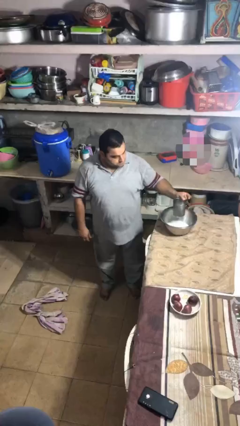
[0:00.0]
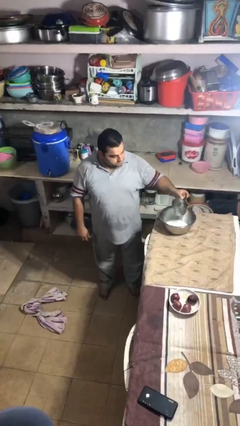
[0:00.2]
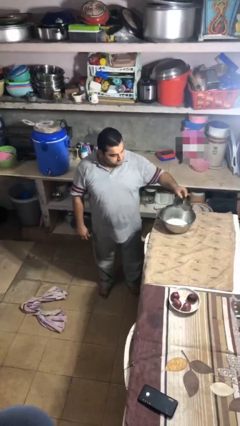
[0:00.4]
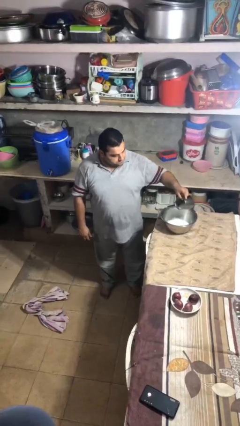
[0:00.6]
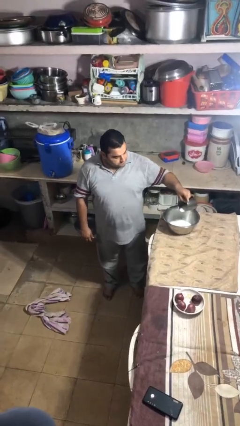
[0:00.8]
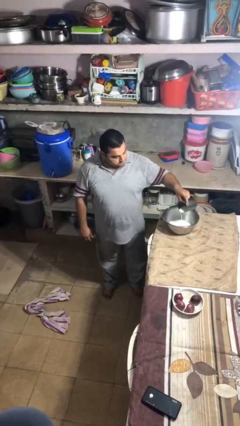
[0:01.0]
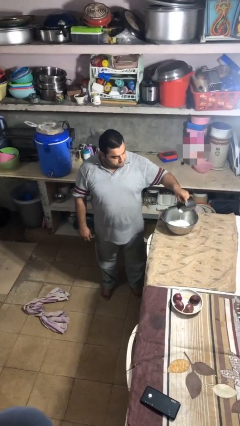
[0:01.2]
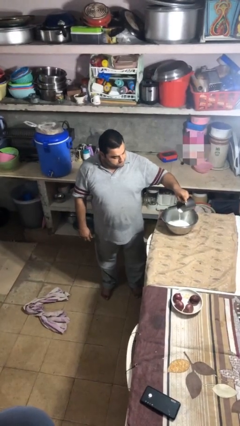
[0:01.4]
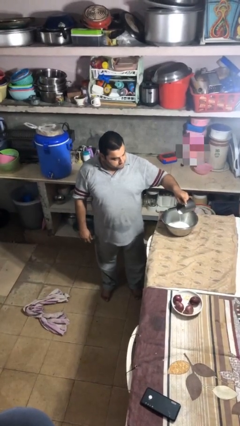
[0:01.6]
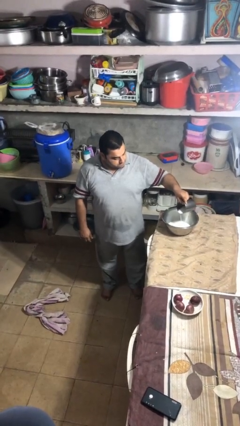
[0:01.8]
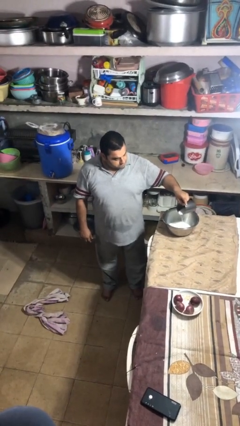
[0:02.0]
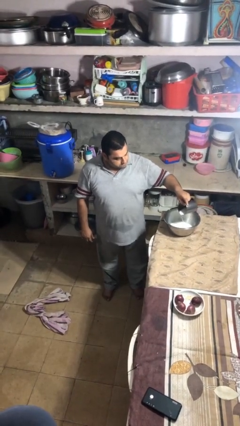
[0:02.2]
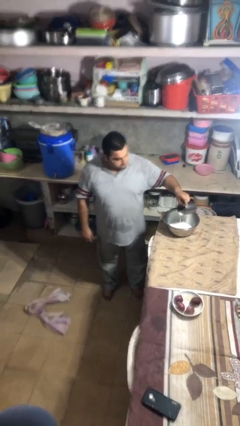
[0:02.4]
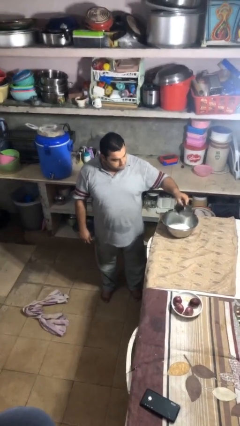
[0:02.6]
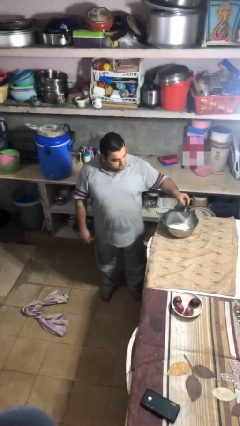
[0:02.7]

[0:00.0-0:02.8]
person pours into bowl

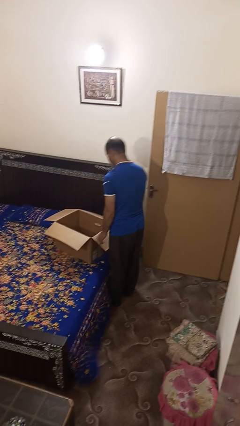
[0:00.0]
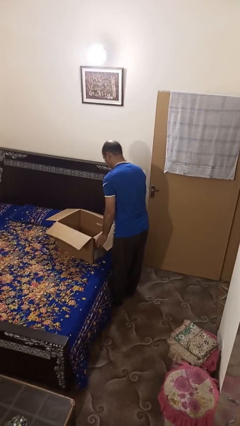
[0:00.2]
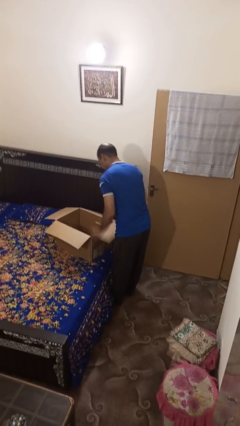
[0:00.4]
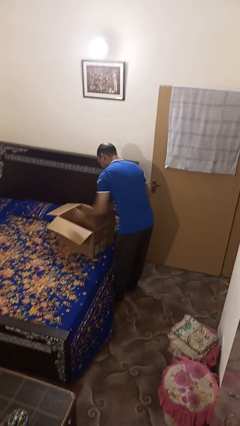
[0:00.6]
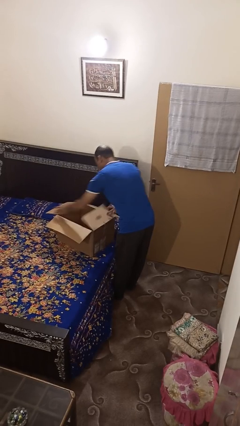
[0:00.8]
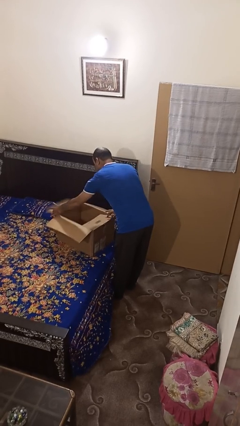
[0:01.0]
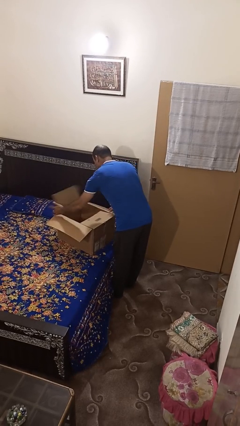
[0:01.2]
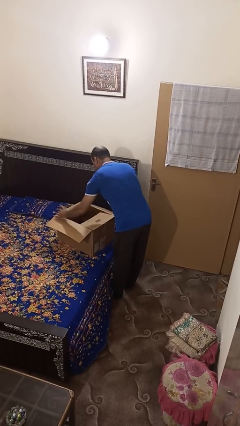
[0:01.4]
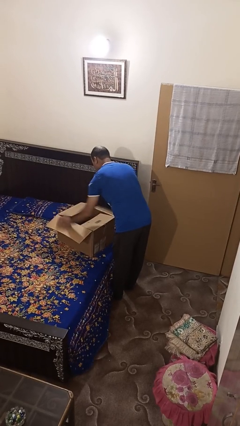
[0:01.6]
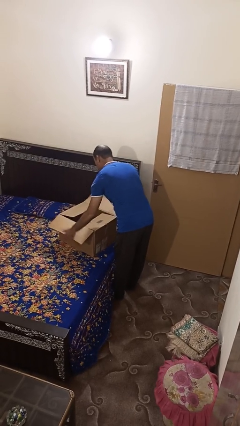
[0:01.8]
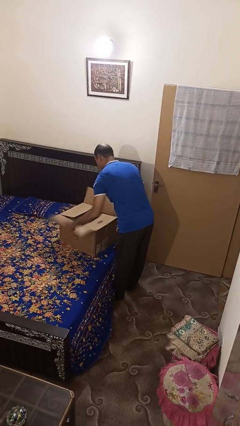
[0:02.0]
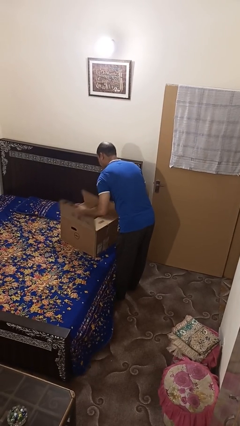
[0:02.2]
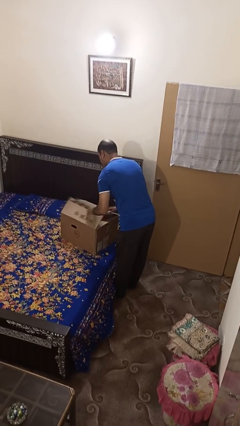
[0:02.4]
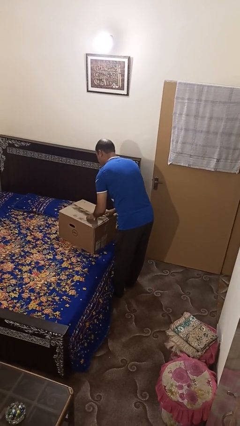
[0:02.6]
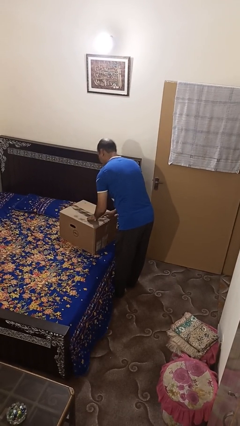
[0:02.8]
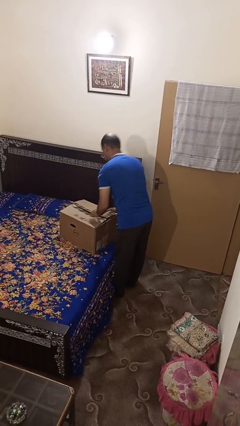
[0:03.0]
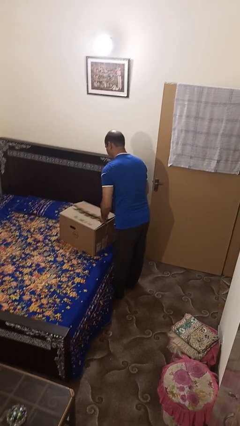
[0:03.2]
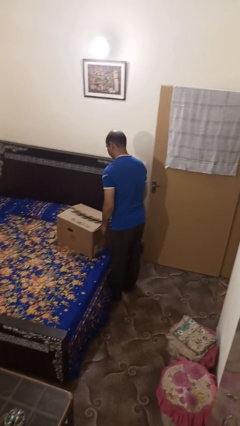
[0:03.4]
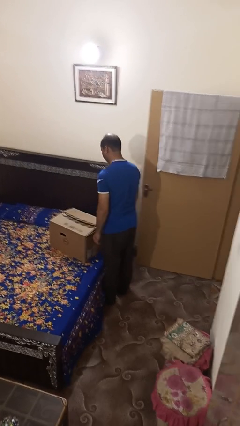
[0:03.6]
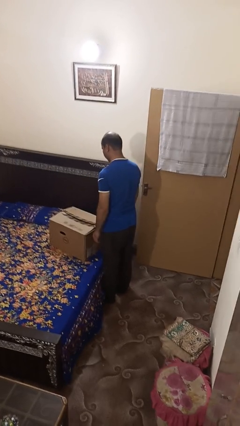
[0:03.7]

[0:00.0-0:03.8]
person closes box

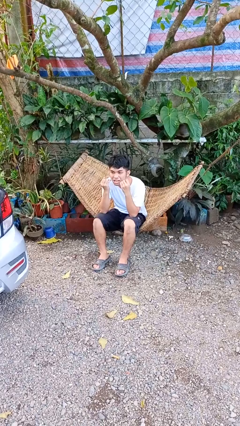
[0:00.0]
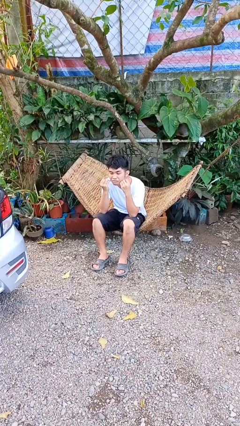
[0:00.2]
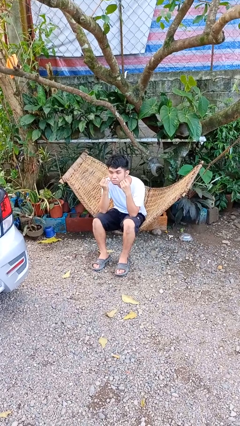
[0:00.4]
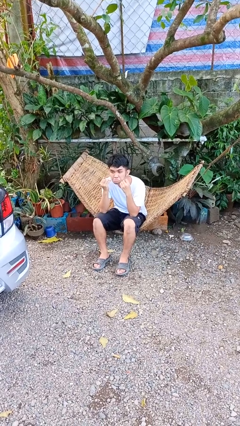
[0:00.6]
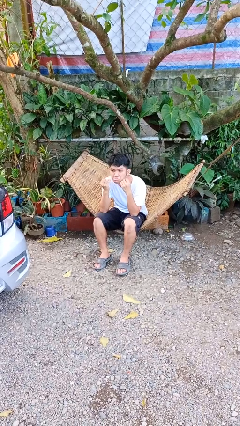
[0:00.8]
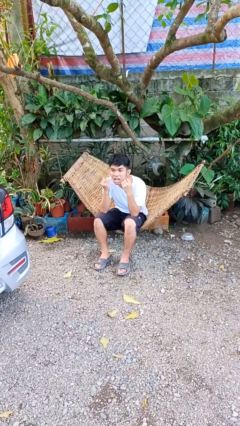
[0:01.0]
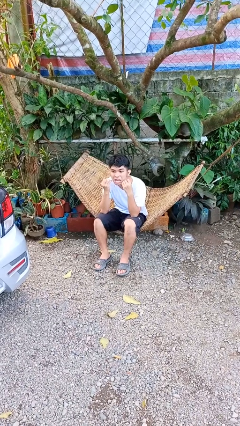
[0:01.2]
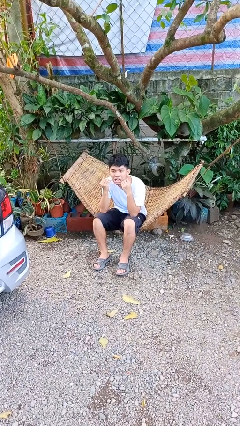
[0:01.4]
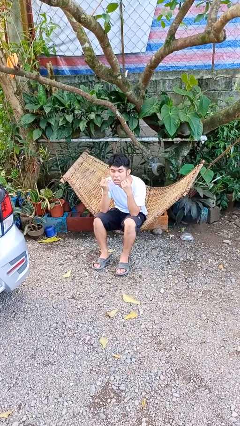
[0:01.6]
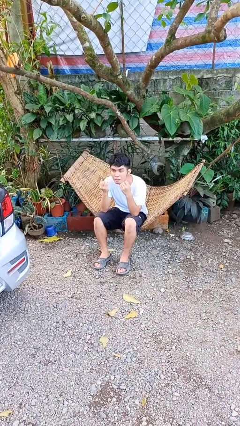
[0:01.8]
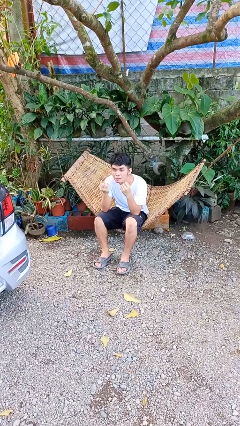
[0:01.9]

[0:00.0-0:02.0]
person flosses

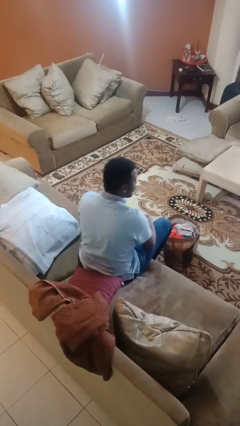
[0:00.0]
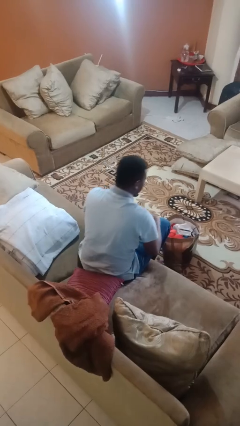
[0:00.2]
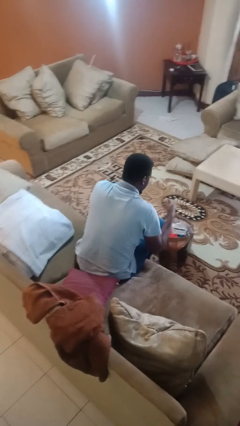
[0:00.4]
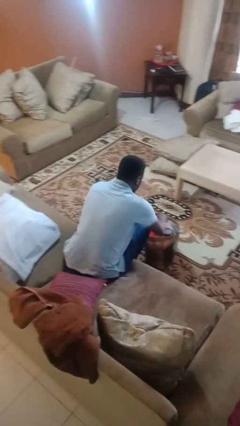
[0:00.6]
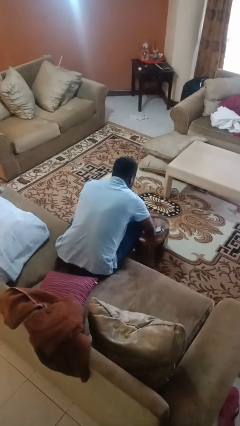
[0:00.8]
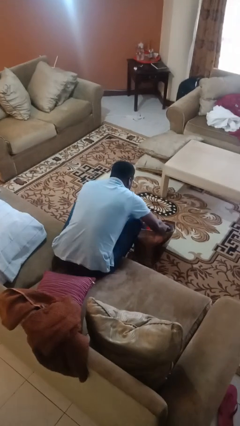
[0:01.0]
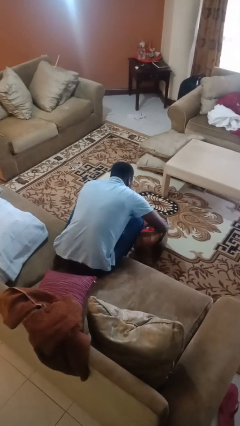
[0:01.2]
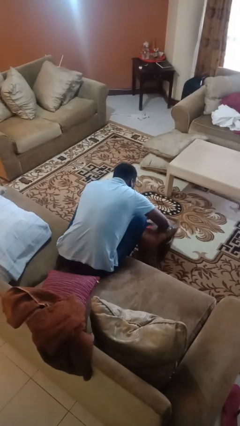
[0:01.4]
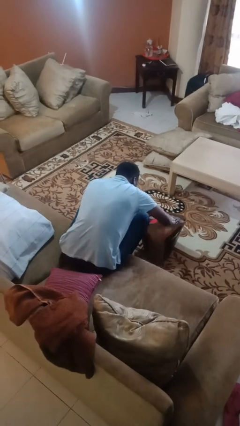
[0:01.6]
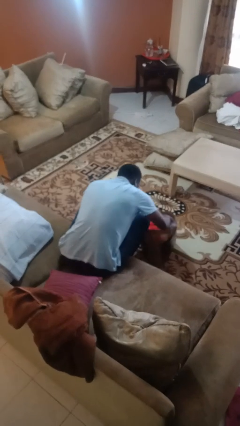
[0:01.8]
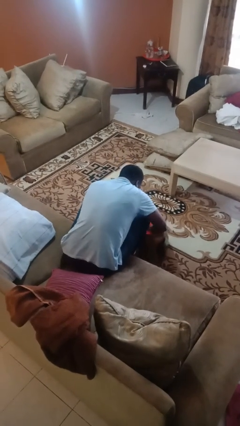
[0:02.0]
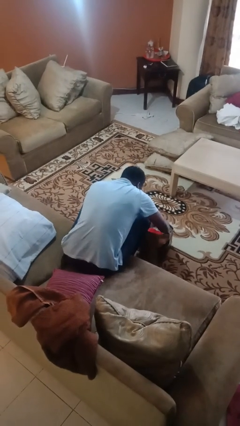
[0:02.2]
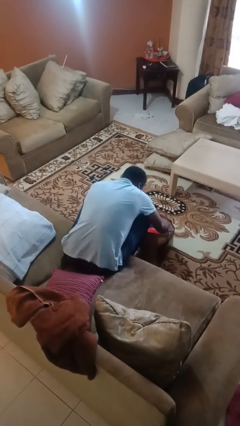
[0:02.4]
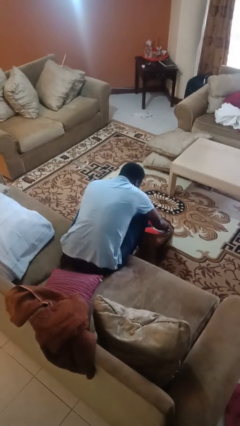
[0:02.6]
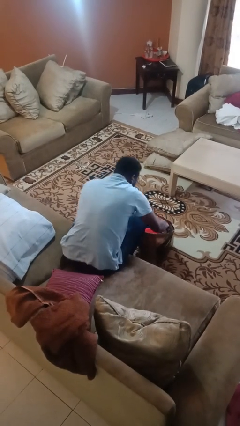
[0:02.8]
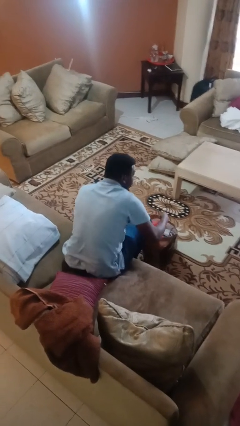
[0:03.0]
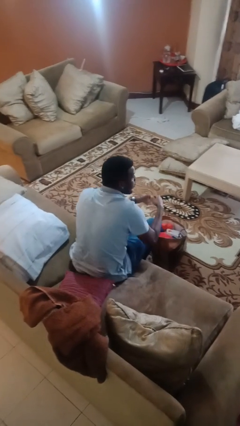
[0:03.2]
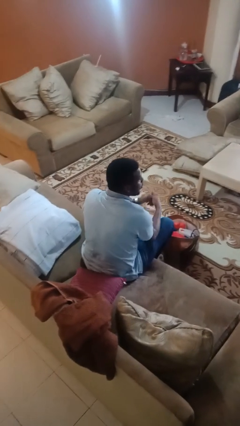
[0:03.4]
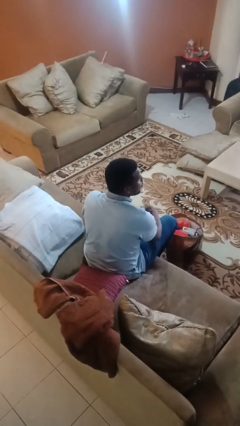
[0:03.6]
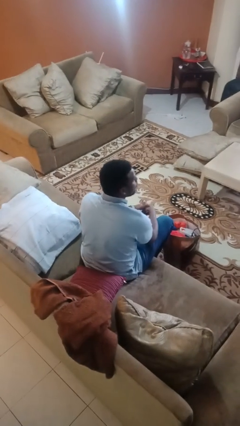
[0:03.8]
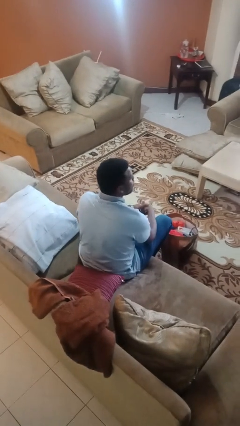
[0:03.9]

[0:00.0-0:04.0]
person searches in bag

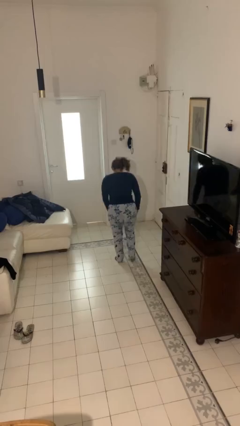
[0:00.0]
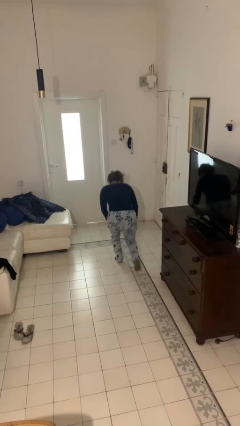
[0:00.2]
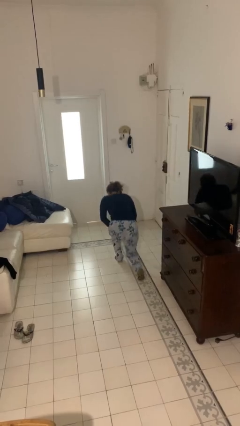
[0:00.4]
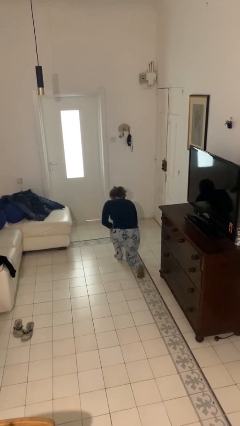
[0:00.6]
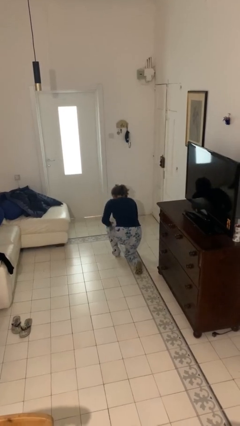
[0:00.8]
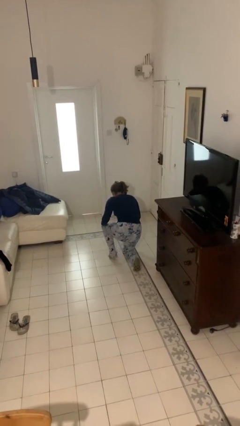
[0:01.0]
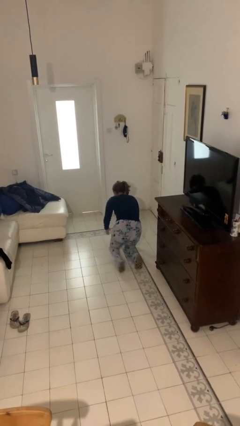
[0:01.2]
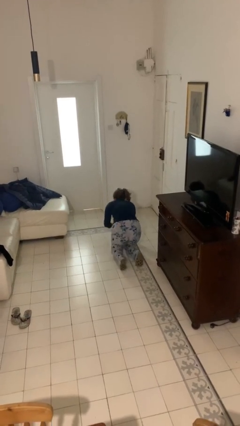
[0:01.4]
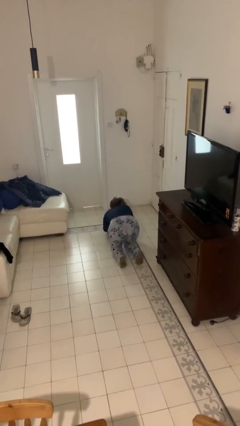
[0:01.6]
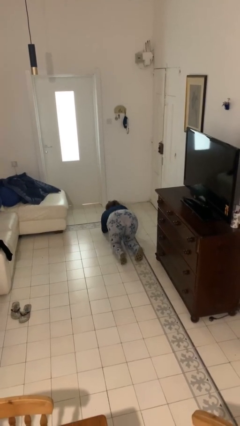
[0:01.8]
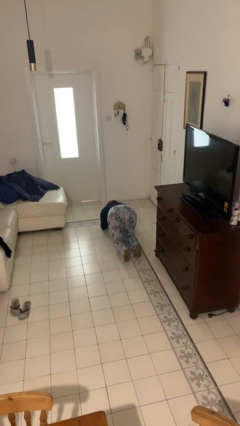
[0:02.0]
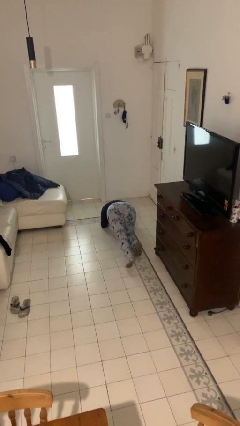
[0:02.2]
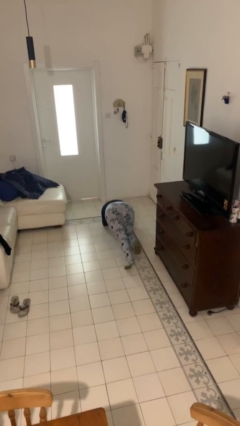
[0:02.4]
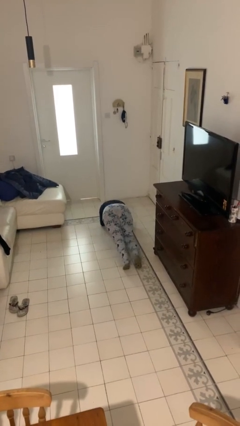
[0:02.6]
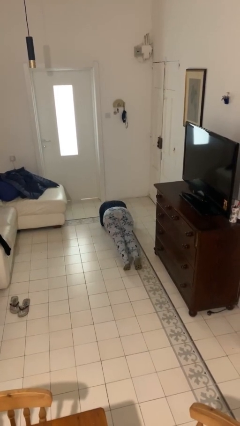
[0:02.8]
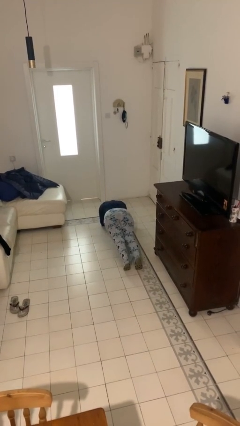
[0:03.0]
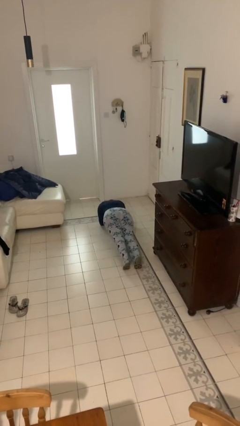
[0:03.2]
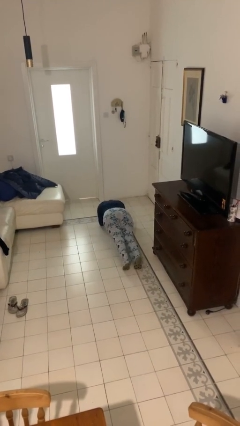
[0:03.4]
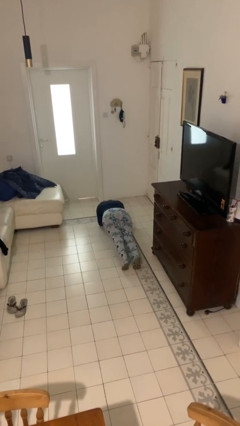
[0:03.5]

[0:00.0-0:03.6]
person exercises with plank

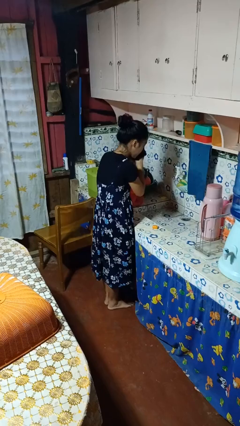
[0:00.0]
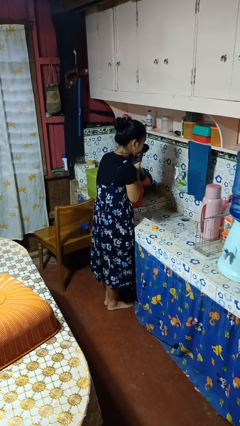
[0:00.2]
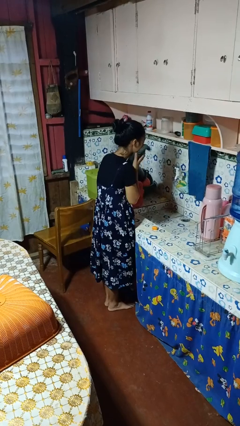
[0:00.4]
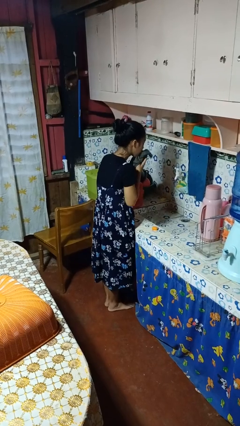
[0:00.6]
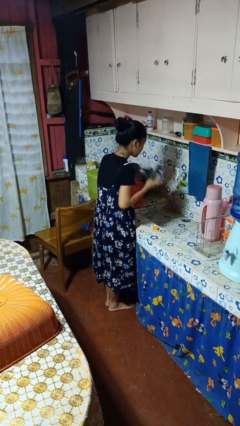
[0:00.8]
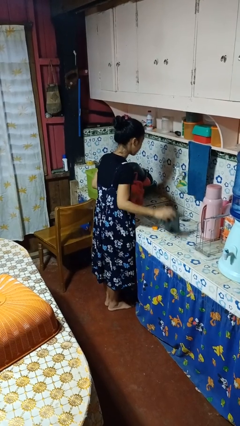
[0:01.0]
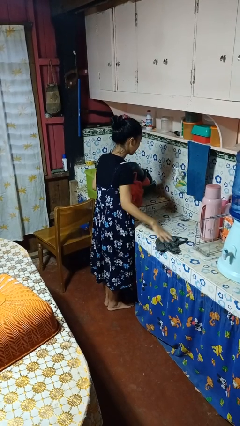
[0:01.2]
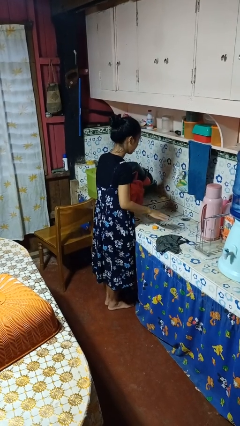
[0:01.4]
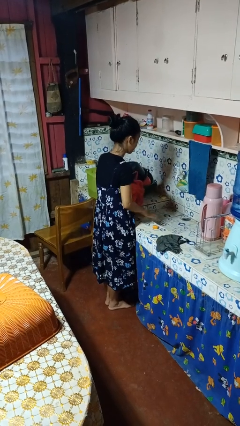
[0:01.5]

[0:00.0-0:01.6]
person dries face with towel
